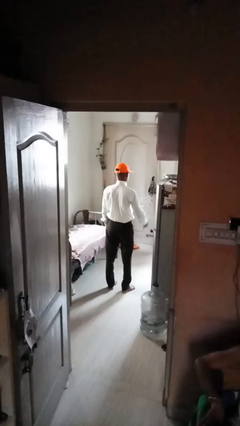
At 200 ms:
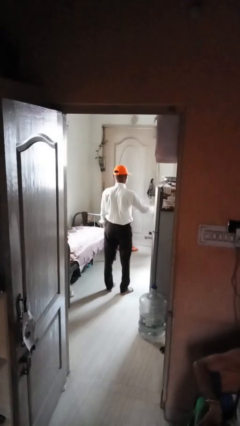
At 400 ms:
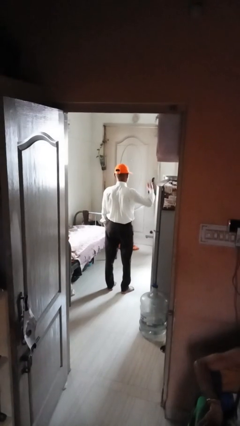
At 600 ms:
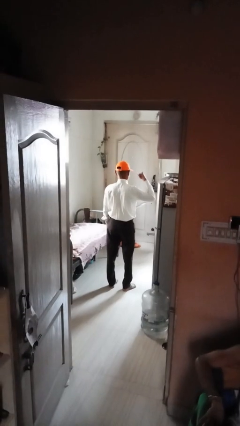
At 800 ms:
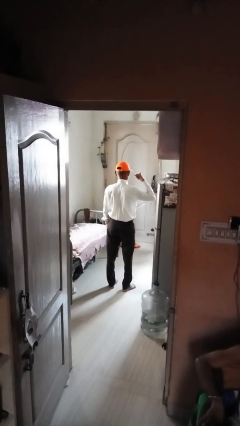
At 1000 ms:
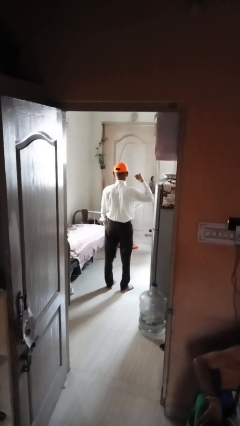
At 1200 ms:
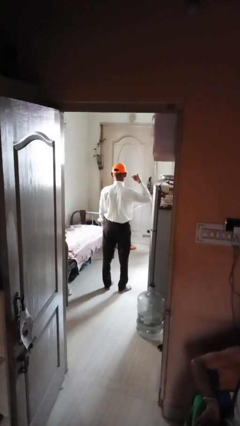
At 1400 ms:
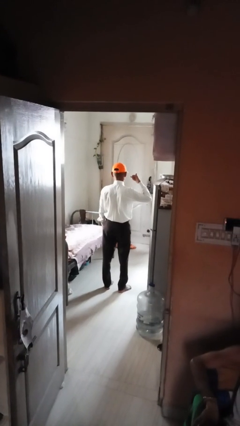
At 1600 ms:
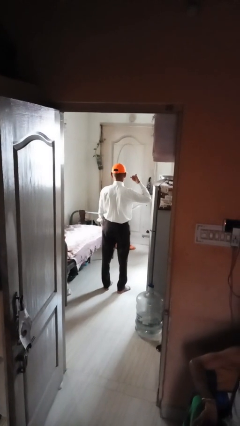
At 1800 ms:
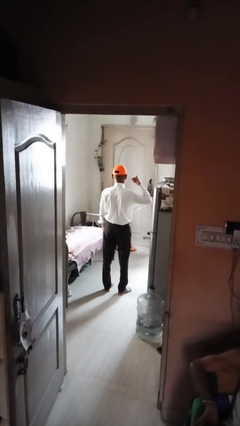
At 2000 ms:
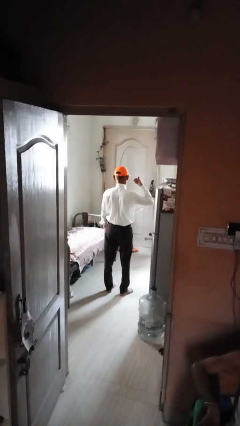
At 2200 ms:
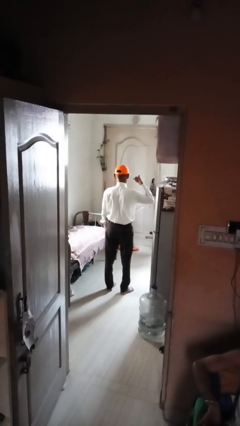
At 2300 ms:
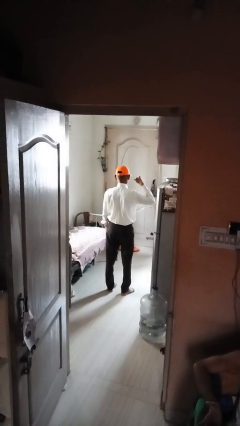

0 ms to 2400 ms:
person gestures call me

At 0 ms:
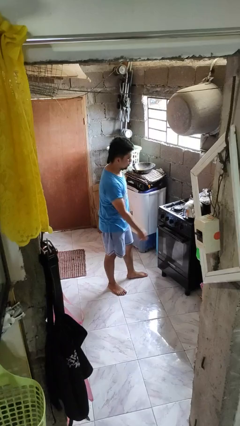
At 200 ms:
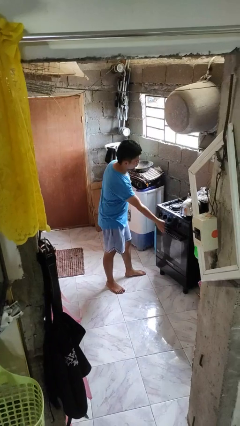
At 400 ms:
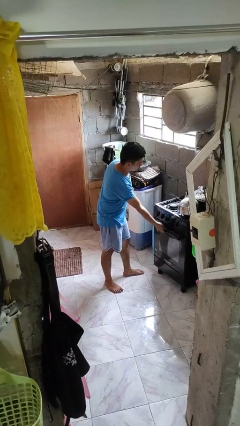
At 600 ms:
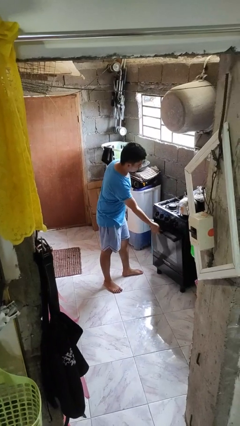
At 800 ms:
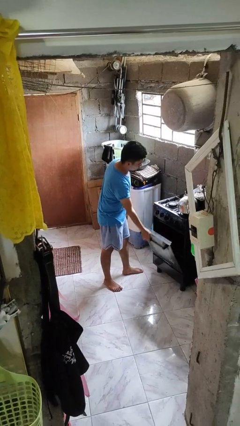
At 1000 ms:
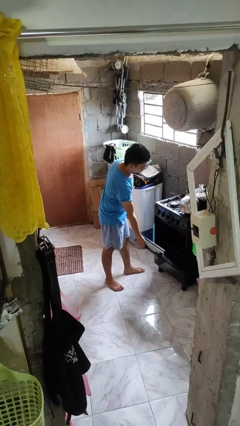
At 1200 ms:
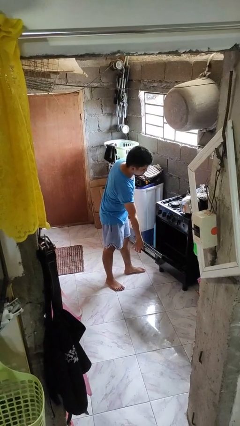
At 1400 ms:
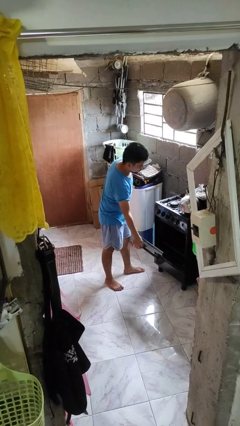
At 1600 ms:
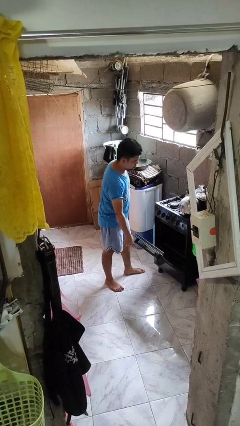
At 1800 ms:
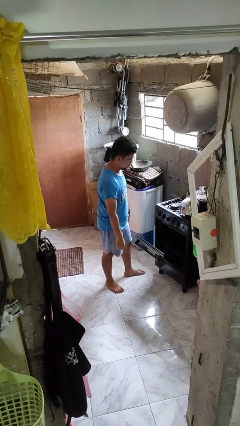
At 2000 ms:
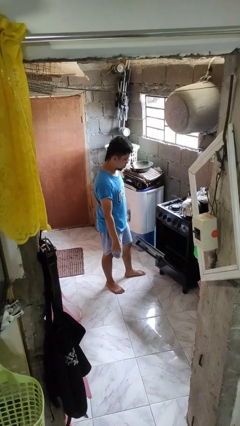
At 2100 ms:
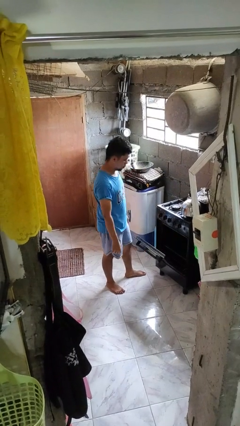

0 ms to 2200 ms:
person opens oven door

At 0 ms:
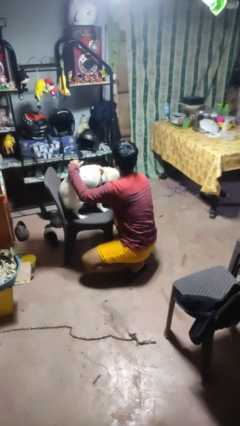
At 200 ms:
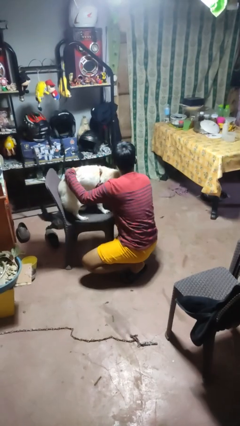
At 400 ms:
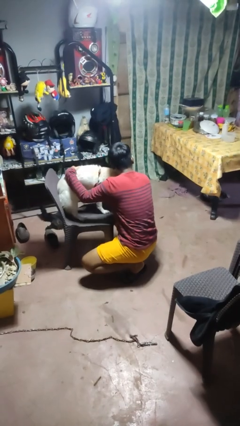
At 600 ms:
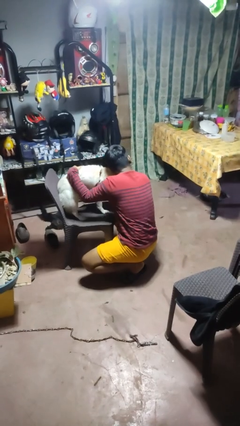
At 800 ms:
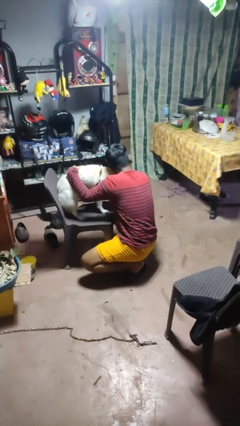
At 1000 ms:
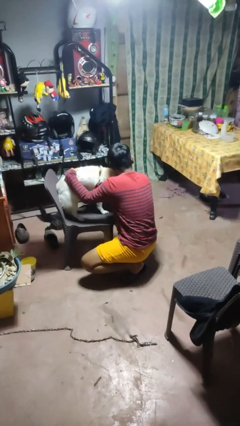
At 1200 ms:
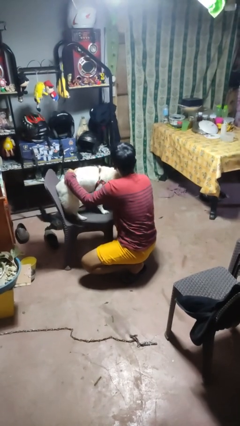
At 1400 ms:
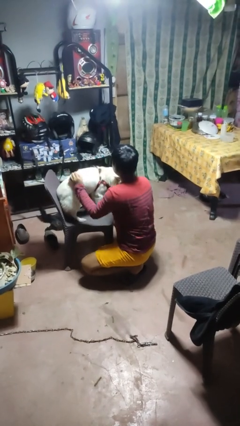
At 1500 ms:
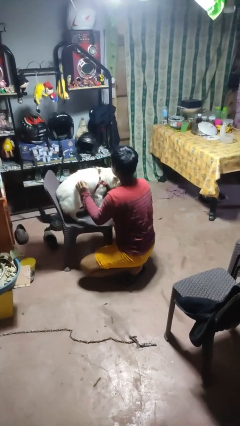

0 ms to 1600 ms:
person hugs dog

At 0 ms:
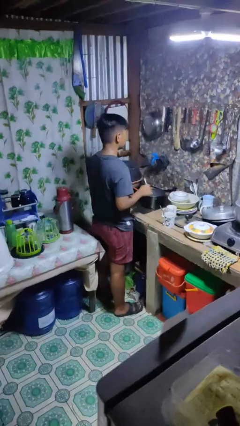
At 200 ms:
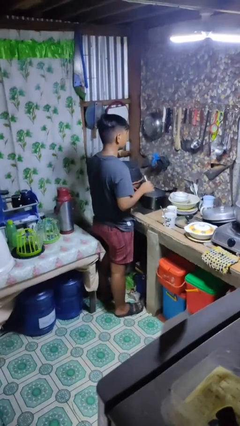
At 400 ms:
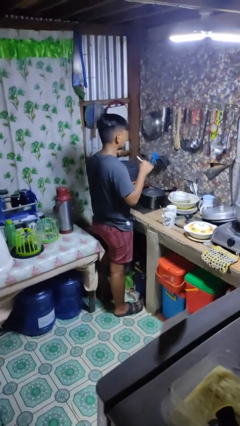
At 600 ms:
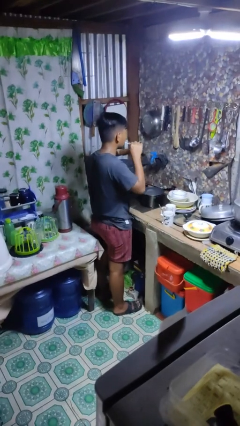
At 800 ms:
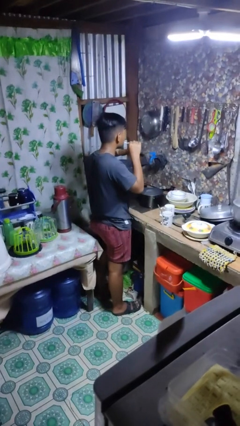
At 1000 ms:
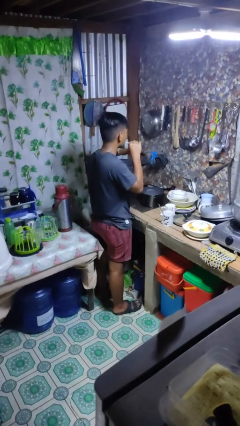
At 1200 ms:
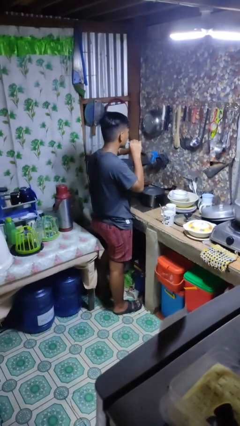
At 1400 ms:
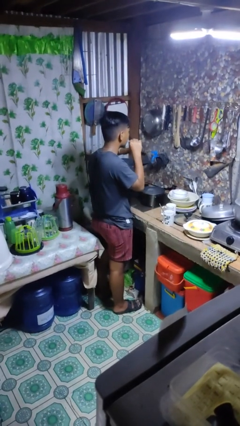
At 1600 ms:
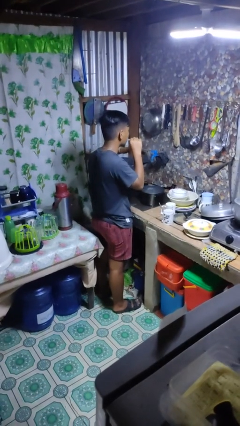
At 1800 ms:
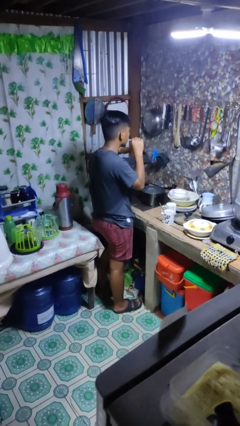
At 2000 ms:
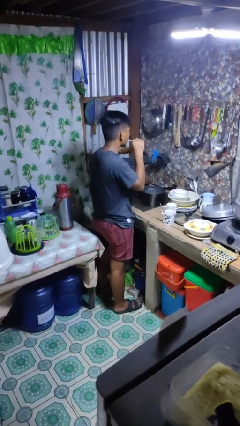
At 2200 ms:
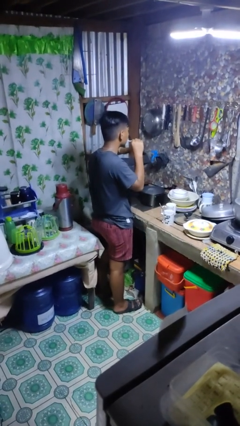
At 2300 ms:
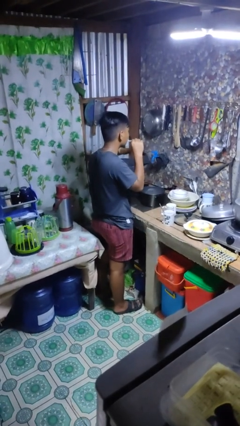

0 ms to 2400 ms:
person brushes teeth

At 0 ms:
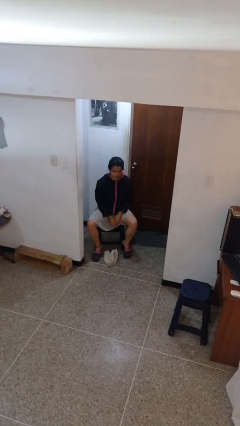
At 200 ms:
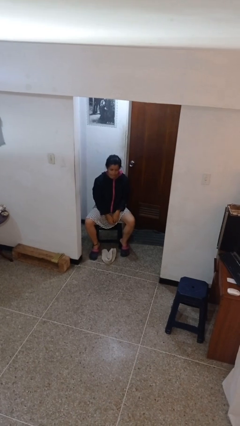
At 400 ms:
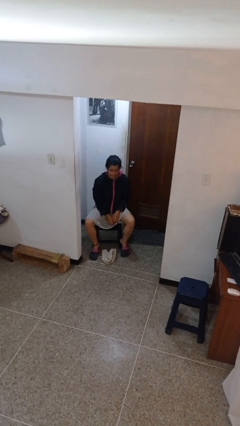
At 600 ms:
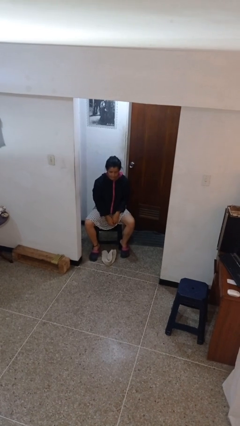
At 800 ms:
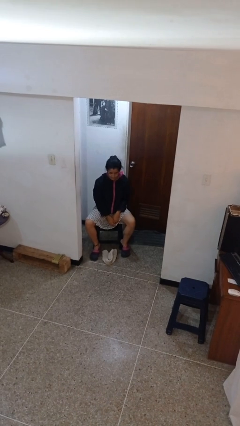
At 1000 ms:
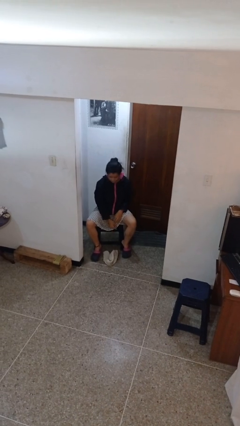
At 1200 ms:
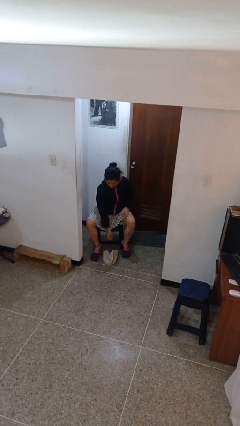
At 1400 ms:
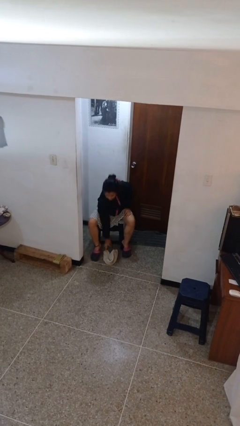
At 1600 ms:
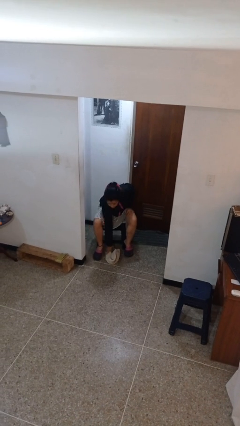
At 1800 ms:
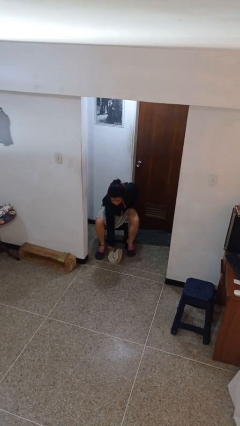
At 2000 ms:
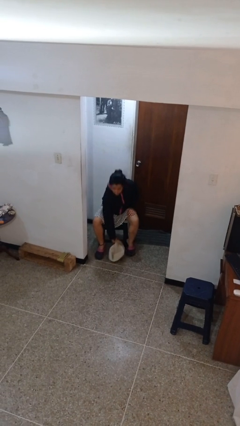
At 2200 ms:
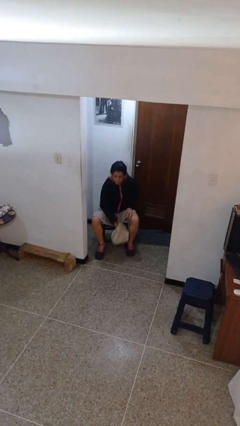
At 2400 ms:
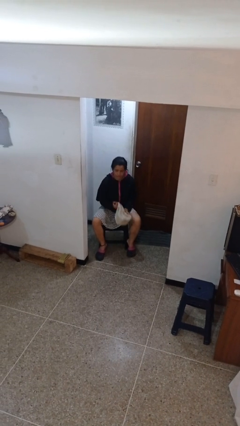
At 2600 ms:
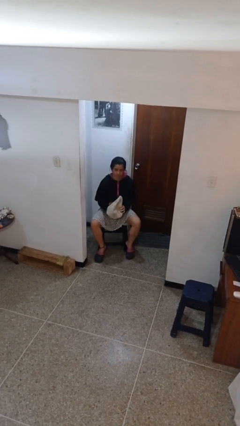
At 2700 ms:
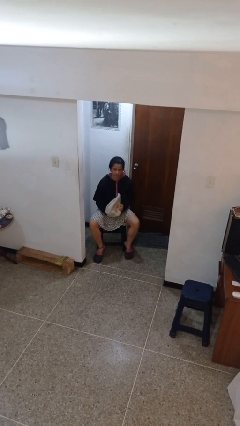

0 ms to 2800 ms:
person picks up object from floor

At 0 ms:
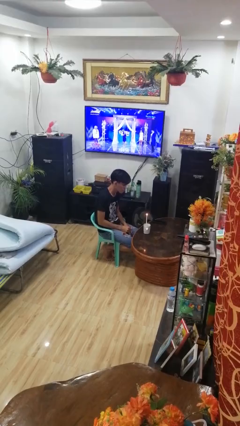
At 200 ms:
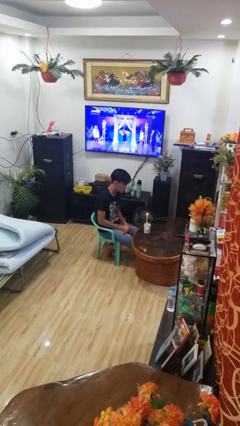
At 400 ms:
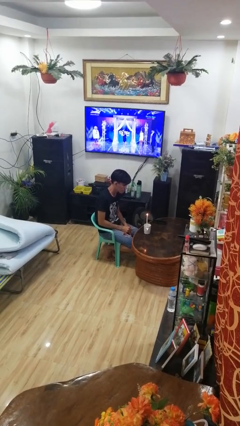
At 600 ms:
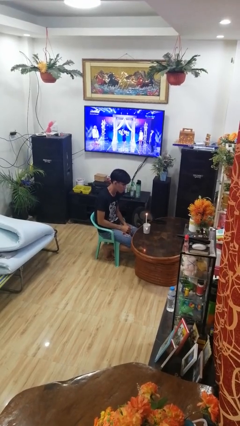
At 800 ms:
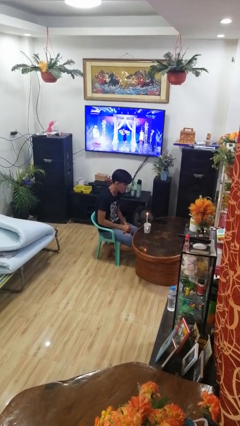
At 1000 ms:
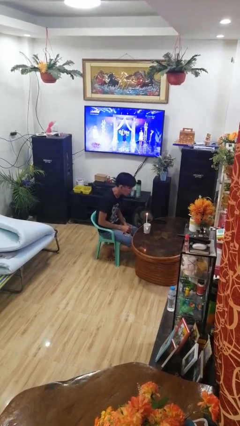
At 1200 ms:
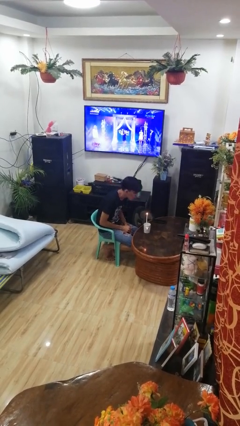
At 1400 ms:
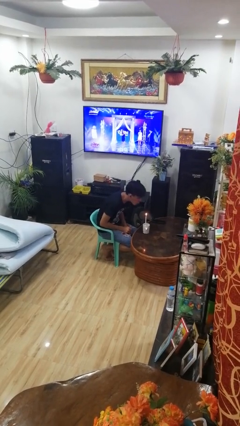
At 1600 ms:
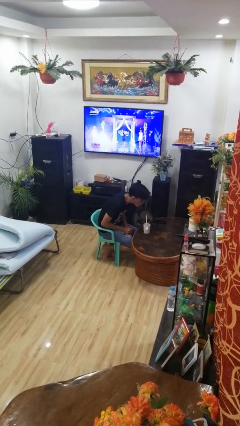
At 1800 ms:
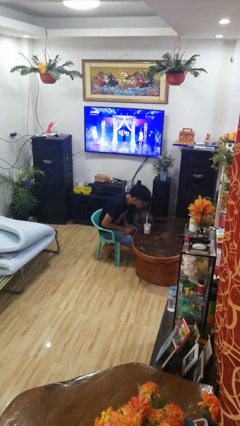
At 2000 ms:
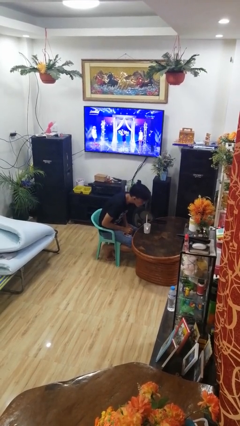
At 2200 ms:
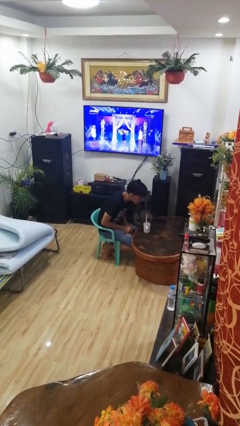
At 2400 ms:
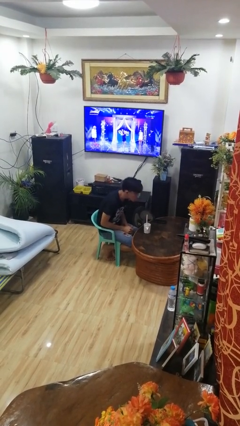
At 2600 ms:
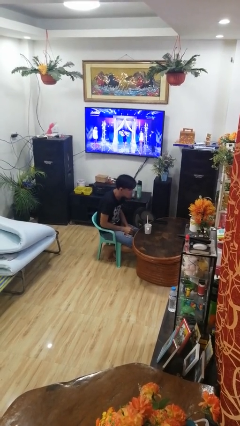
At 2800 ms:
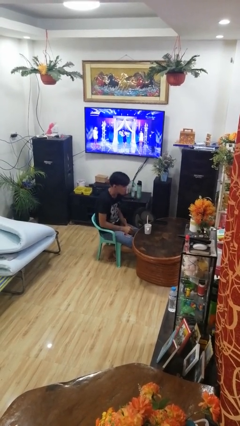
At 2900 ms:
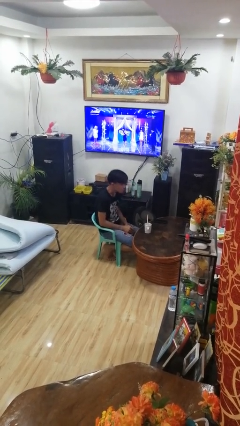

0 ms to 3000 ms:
person extinguishes candle

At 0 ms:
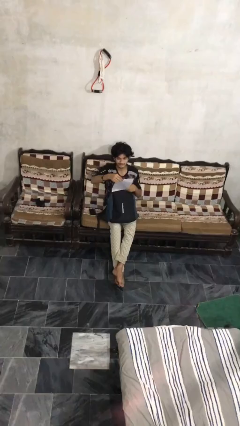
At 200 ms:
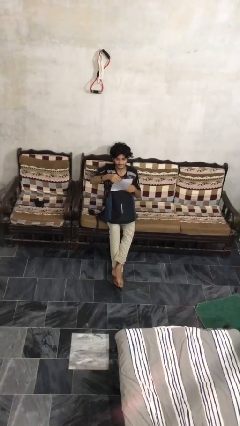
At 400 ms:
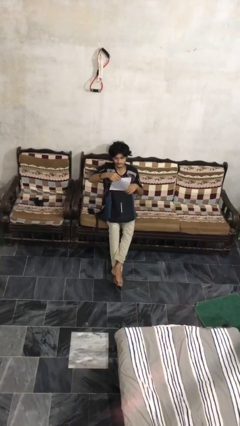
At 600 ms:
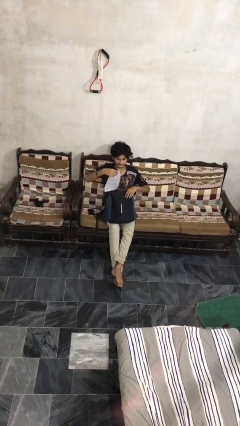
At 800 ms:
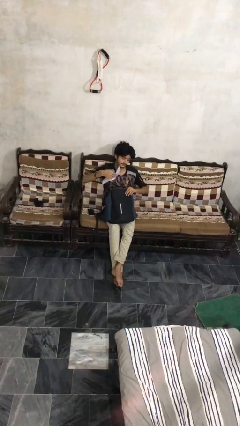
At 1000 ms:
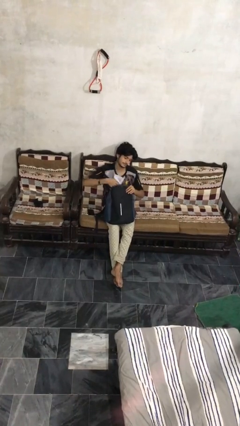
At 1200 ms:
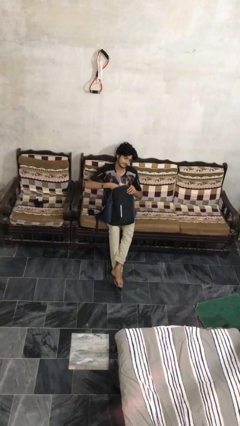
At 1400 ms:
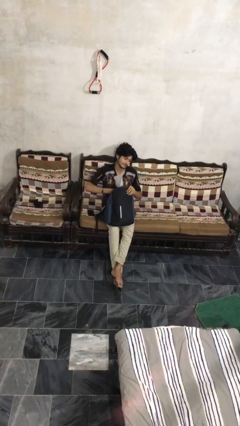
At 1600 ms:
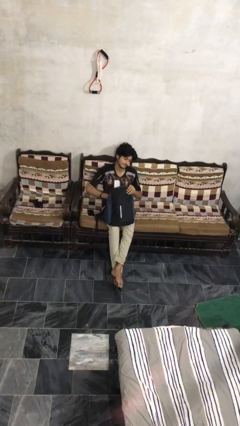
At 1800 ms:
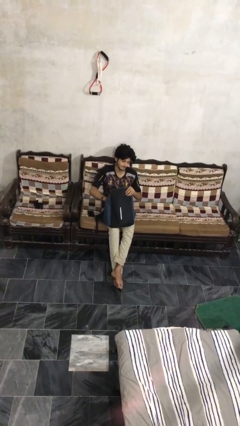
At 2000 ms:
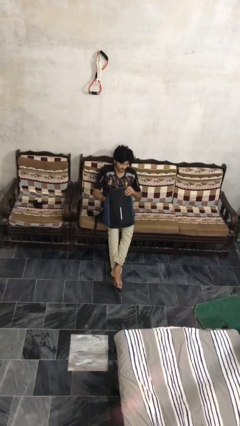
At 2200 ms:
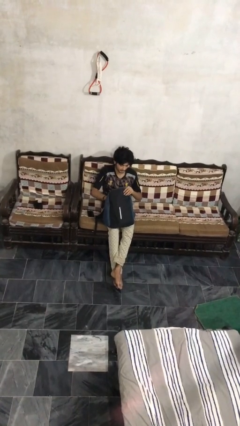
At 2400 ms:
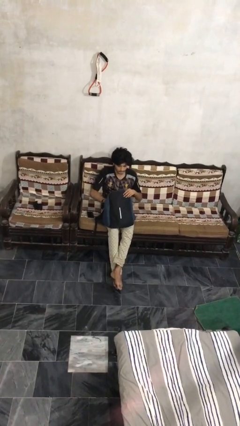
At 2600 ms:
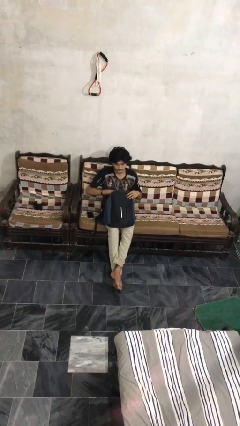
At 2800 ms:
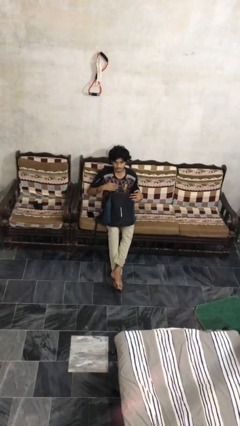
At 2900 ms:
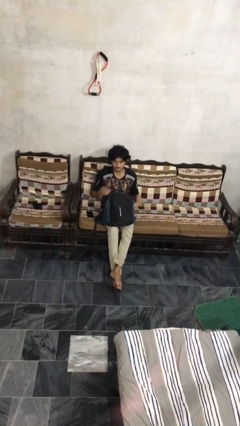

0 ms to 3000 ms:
person puts object into backpack
